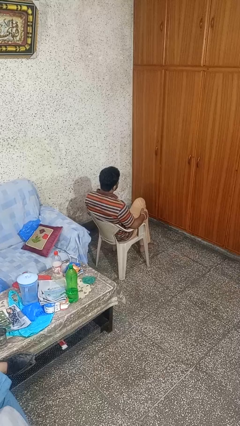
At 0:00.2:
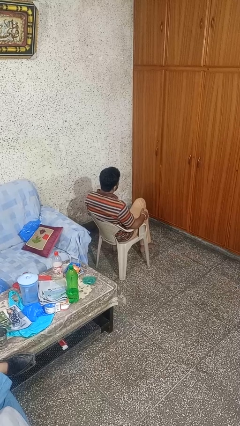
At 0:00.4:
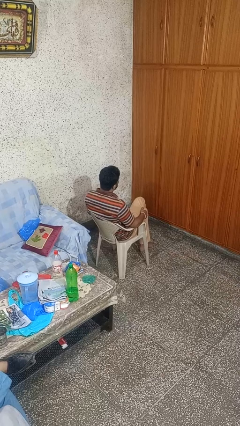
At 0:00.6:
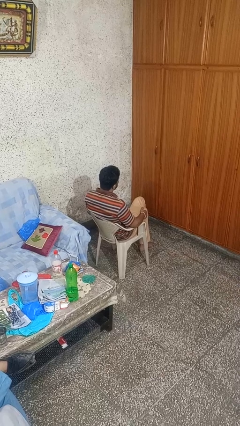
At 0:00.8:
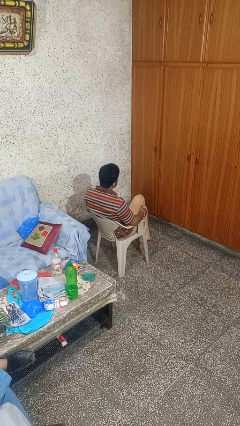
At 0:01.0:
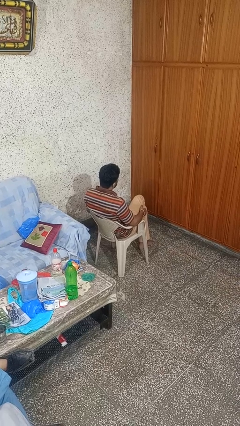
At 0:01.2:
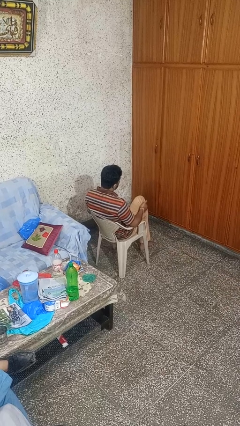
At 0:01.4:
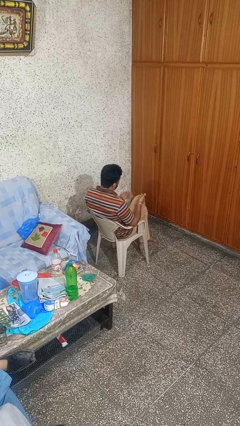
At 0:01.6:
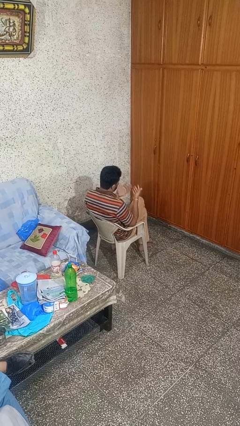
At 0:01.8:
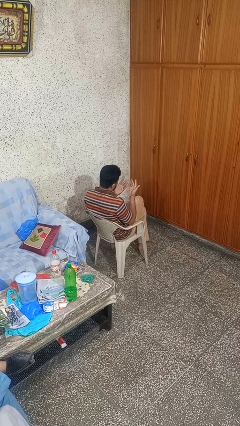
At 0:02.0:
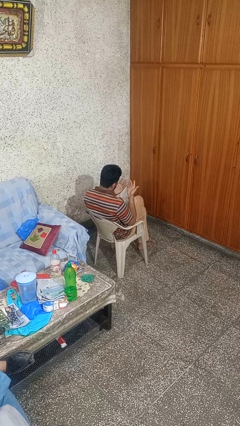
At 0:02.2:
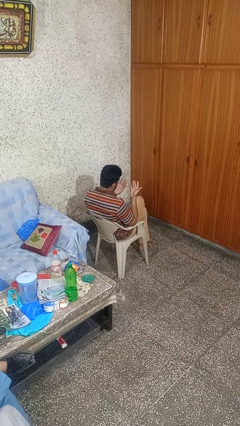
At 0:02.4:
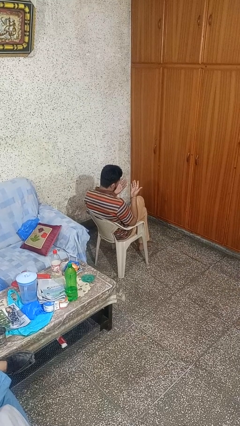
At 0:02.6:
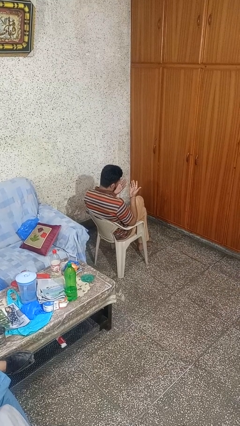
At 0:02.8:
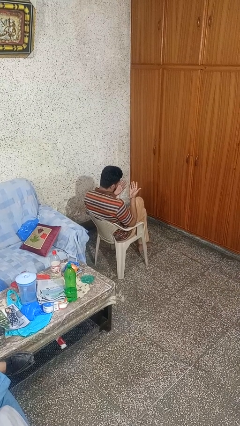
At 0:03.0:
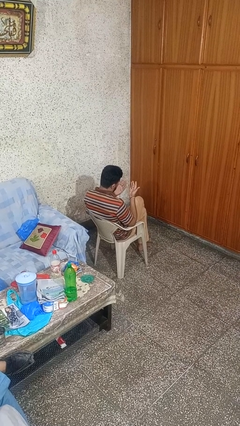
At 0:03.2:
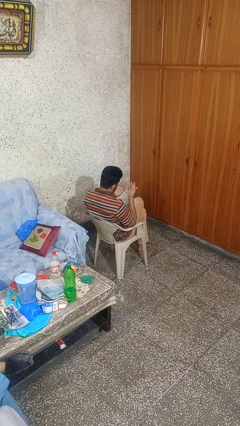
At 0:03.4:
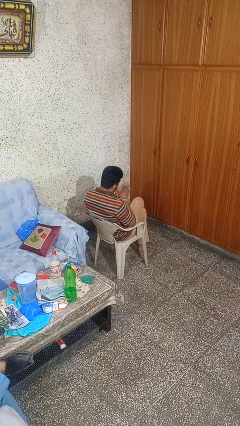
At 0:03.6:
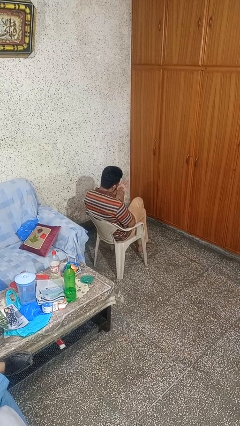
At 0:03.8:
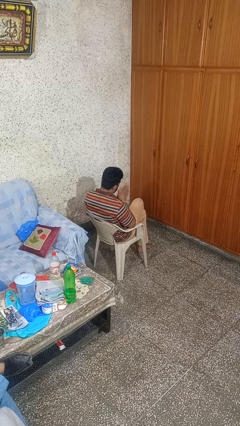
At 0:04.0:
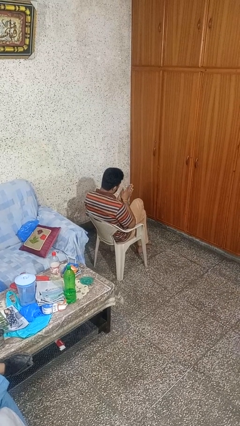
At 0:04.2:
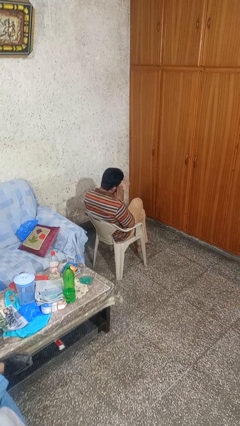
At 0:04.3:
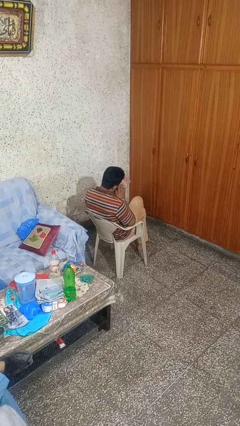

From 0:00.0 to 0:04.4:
person looks at hands in lap

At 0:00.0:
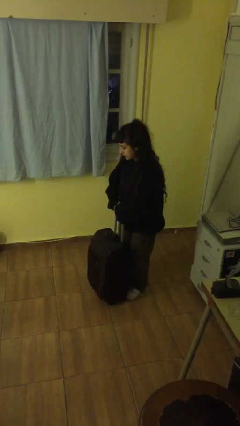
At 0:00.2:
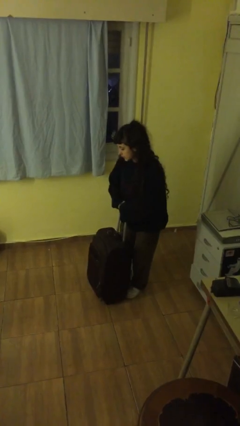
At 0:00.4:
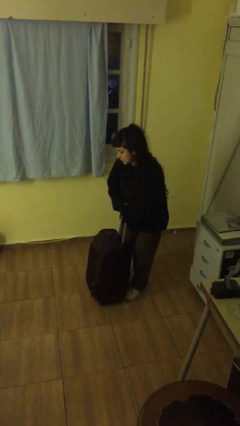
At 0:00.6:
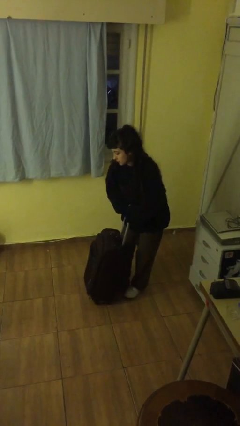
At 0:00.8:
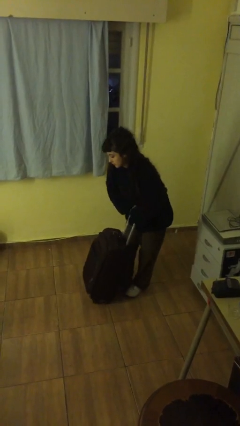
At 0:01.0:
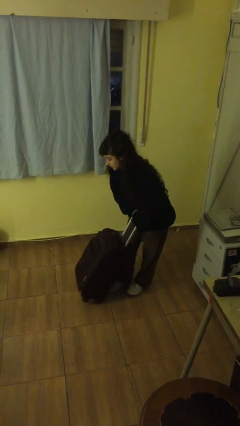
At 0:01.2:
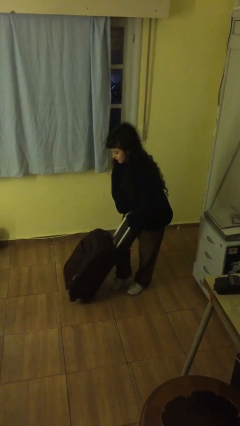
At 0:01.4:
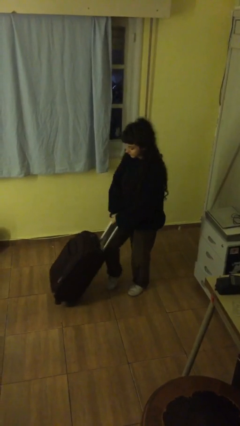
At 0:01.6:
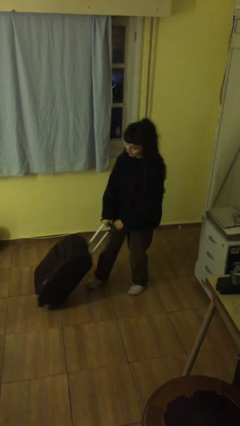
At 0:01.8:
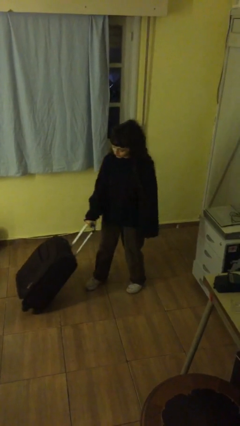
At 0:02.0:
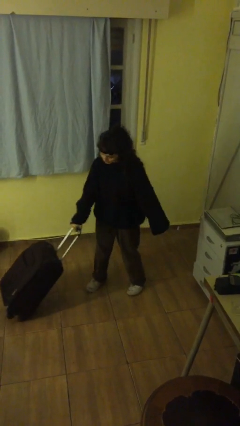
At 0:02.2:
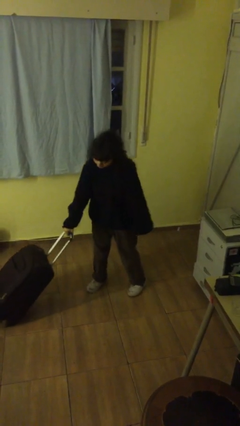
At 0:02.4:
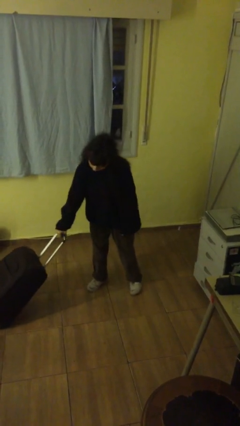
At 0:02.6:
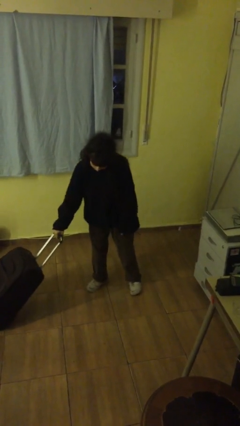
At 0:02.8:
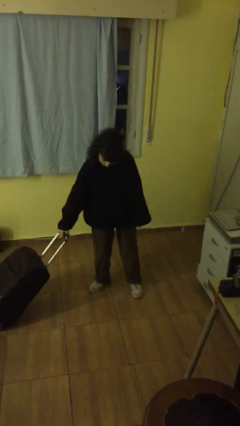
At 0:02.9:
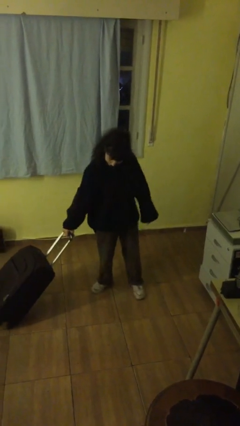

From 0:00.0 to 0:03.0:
person pushes wheeled cart

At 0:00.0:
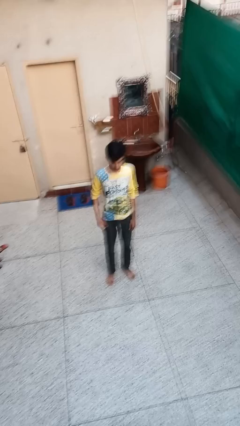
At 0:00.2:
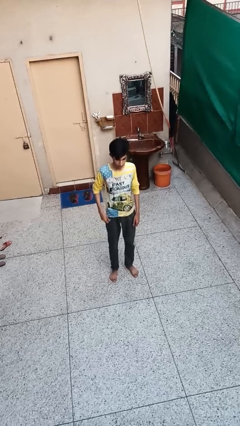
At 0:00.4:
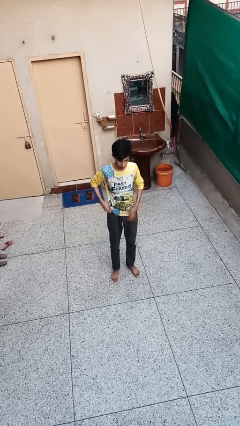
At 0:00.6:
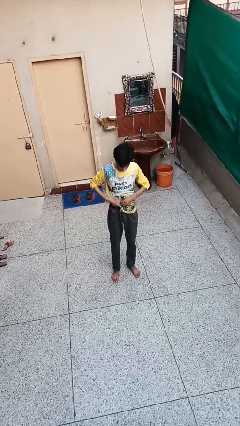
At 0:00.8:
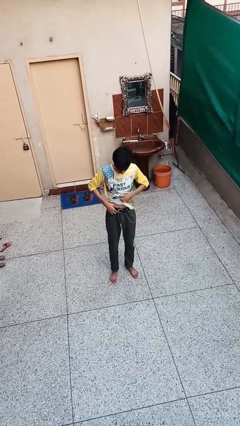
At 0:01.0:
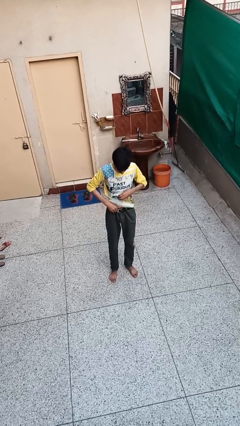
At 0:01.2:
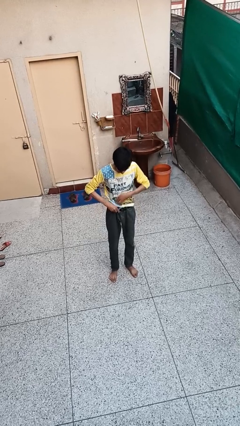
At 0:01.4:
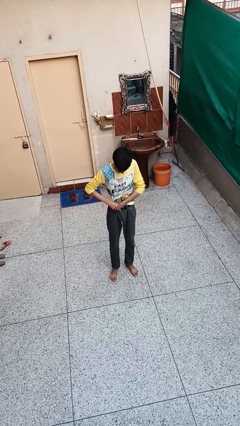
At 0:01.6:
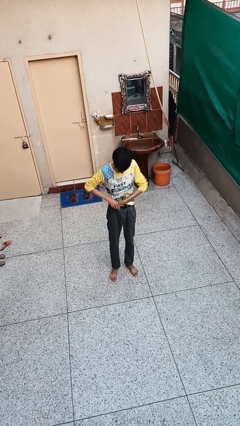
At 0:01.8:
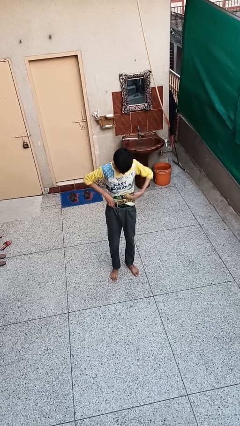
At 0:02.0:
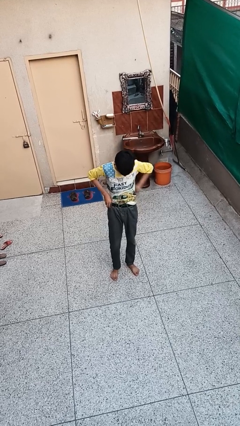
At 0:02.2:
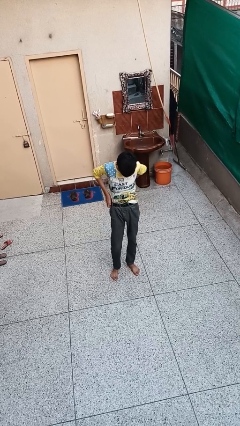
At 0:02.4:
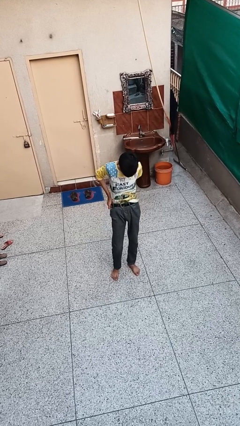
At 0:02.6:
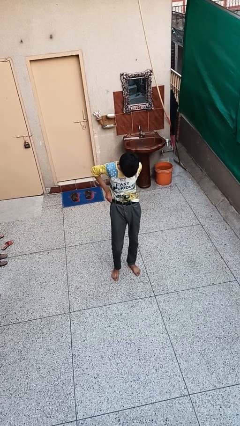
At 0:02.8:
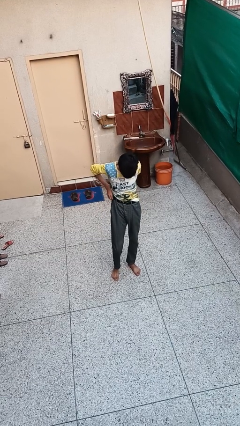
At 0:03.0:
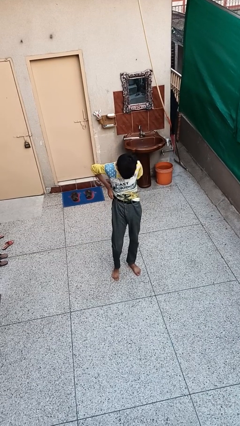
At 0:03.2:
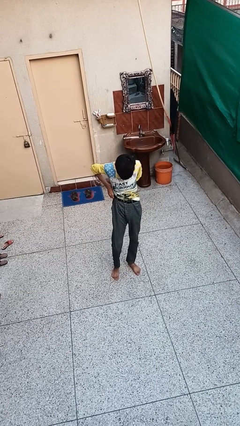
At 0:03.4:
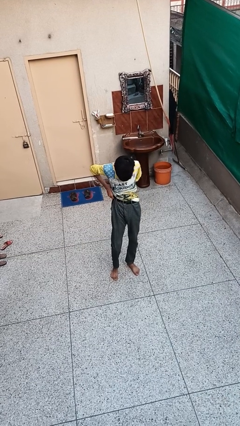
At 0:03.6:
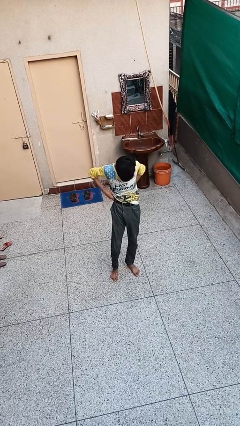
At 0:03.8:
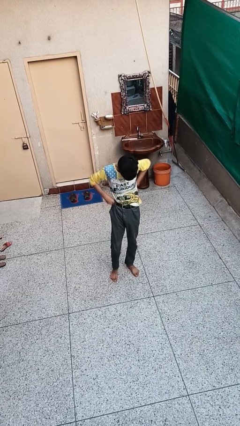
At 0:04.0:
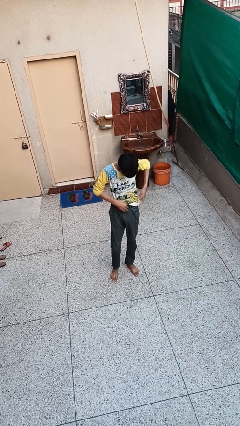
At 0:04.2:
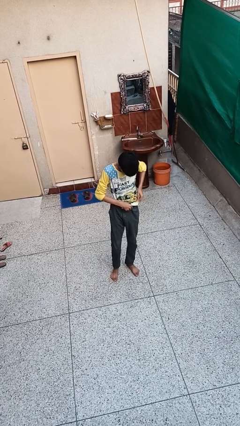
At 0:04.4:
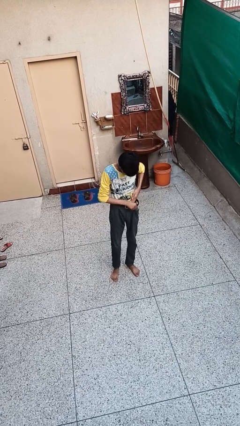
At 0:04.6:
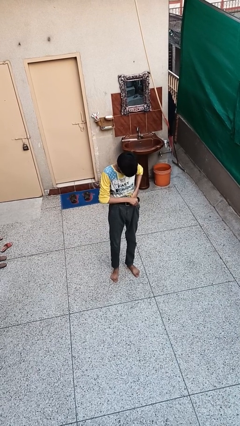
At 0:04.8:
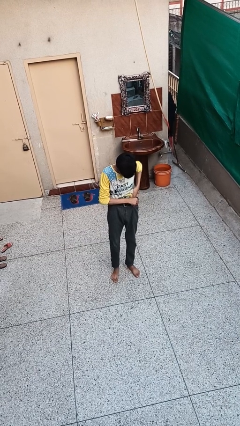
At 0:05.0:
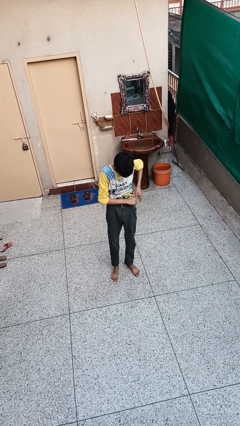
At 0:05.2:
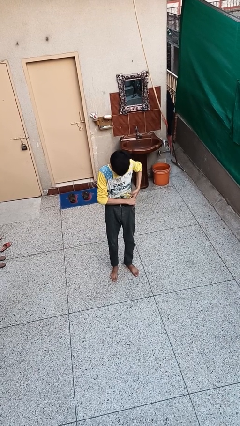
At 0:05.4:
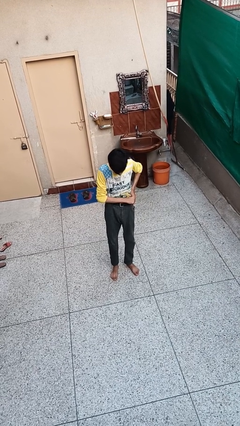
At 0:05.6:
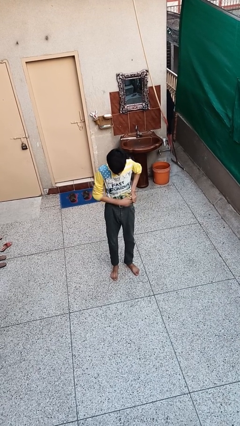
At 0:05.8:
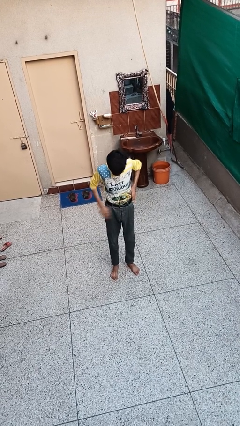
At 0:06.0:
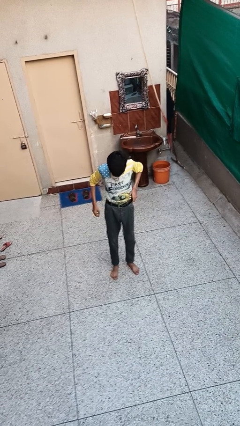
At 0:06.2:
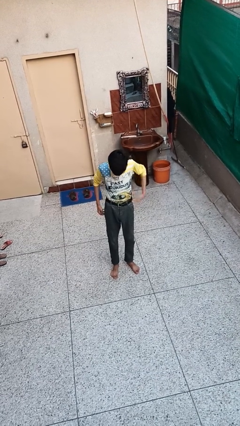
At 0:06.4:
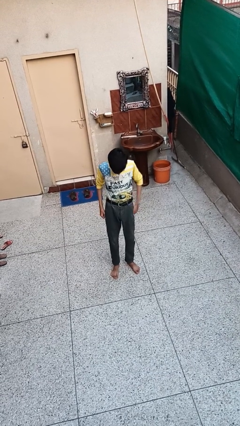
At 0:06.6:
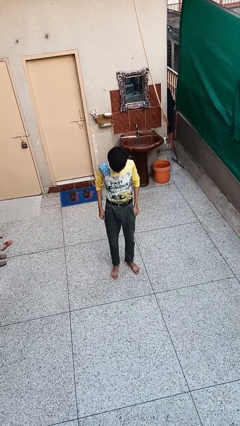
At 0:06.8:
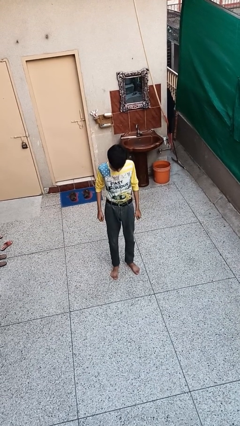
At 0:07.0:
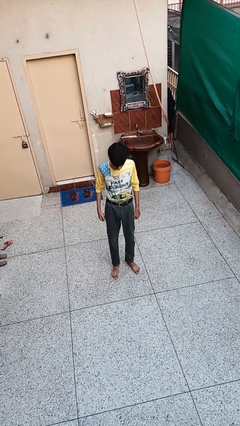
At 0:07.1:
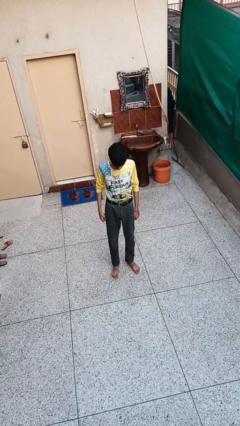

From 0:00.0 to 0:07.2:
person tucks in shirt

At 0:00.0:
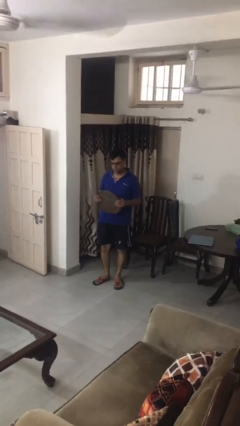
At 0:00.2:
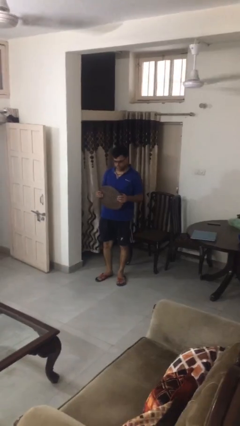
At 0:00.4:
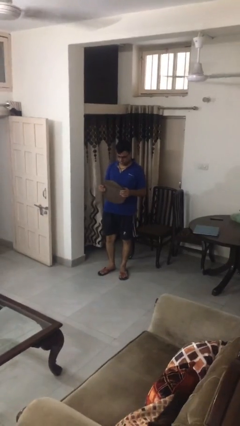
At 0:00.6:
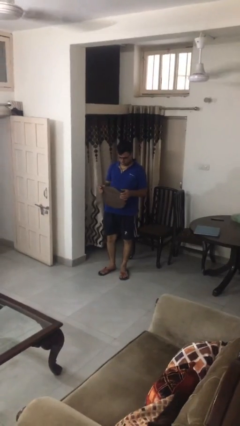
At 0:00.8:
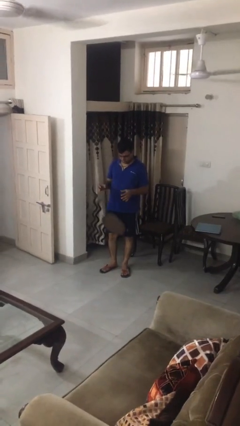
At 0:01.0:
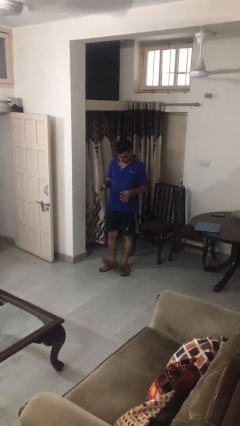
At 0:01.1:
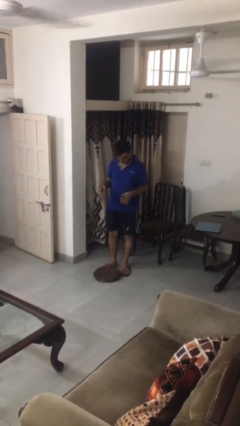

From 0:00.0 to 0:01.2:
person drops object

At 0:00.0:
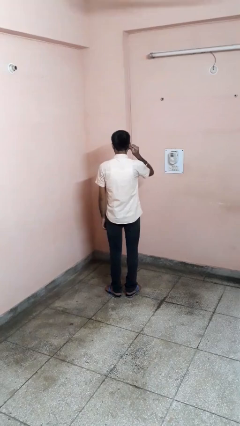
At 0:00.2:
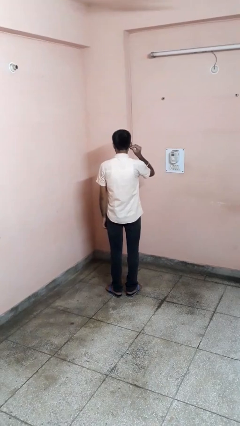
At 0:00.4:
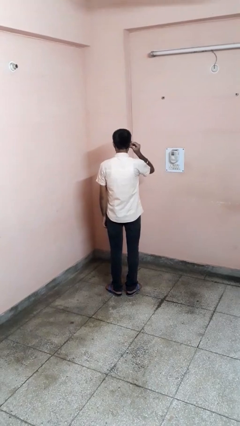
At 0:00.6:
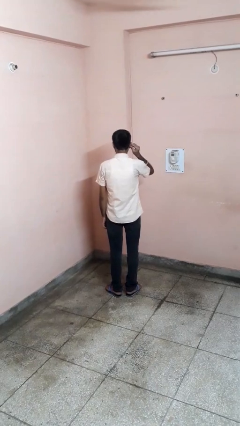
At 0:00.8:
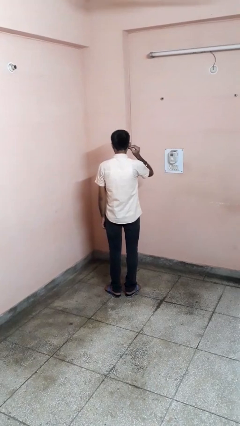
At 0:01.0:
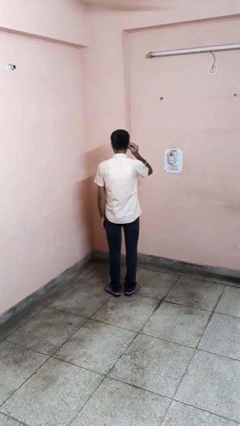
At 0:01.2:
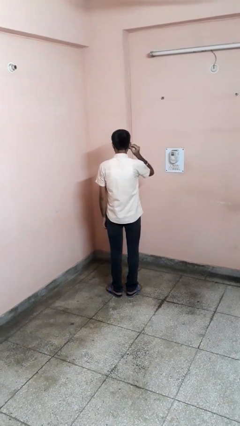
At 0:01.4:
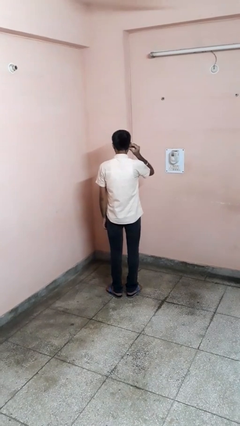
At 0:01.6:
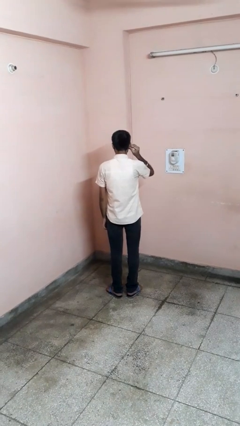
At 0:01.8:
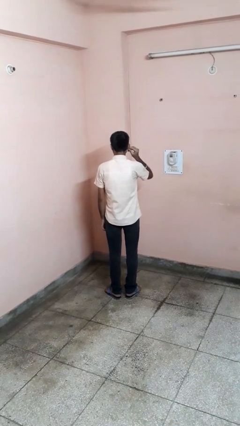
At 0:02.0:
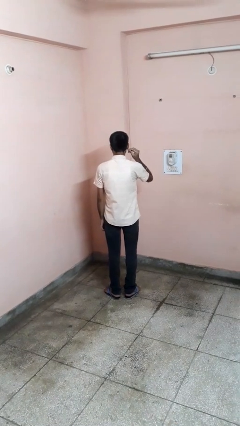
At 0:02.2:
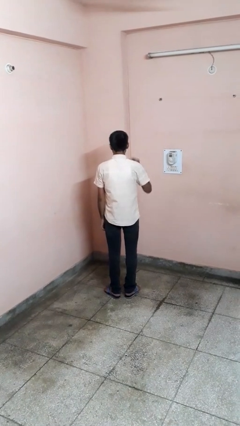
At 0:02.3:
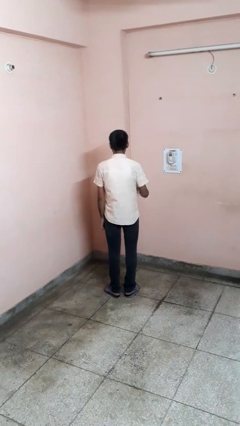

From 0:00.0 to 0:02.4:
person touches earlobe
